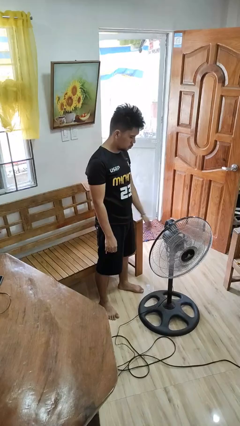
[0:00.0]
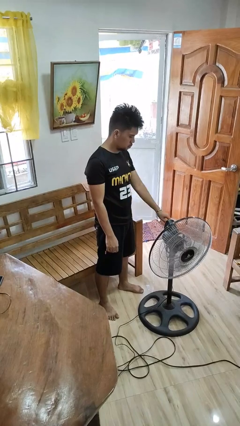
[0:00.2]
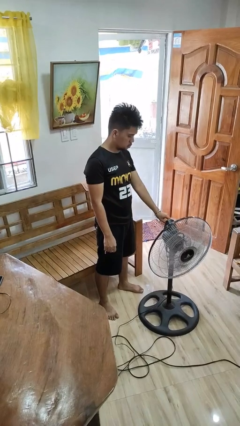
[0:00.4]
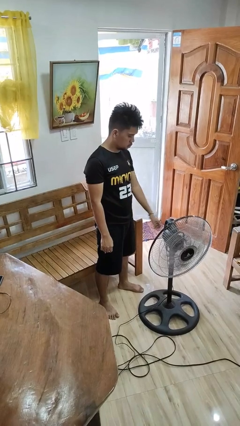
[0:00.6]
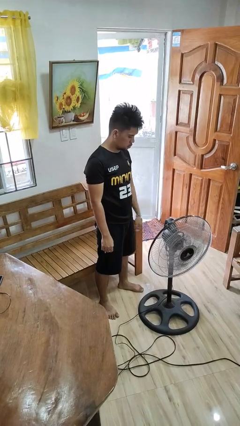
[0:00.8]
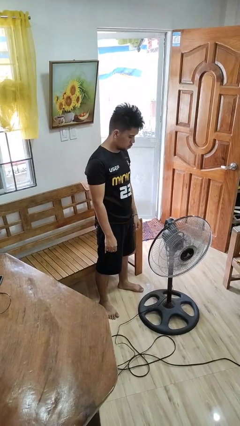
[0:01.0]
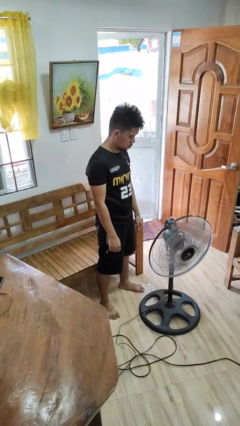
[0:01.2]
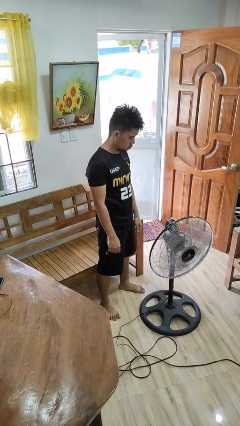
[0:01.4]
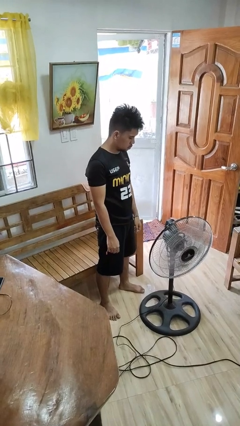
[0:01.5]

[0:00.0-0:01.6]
person turns off fan

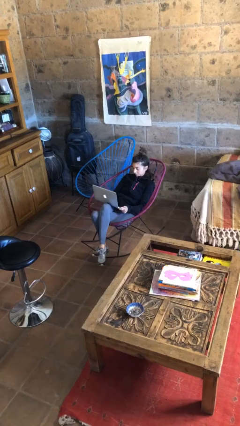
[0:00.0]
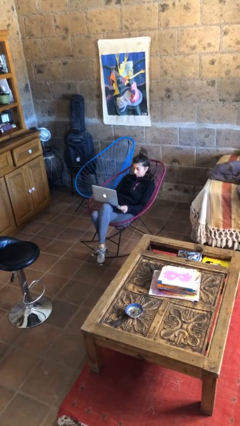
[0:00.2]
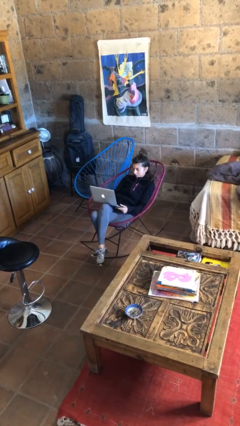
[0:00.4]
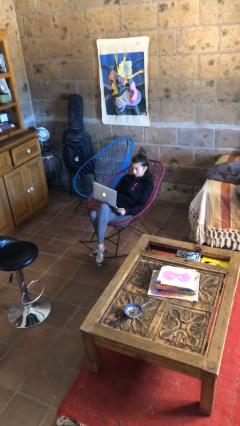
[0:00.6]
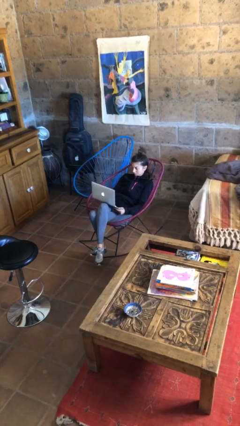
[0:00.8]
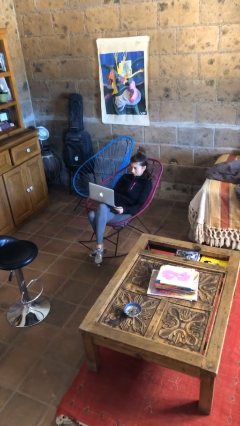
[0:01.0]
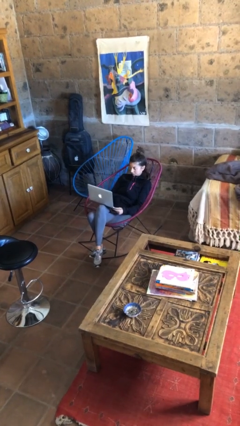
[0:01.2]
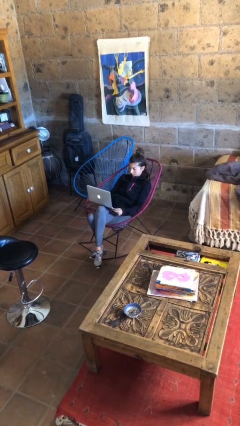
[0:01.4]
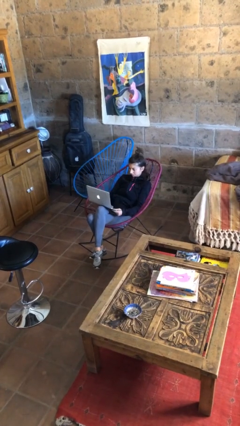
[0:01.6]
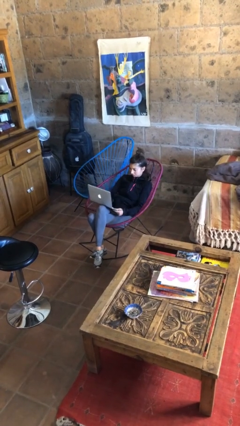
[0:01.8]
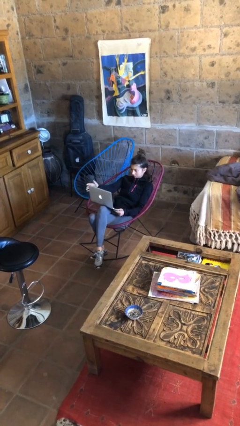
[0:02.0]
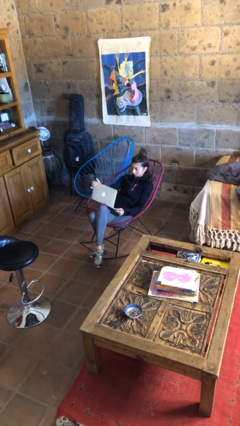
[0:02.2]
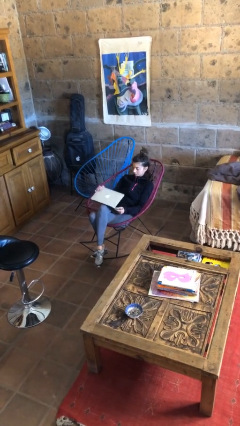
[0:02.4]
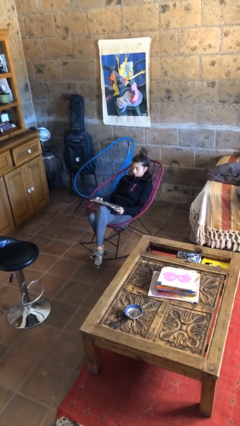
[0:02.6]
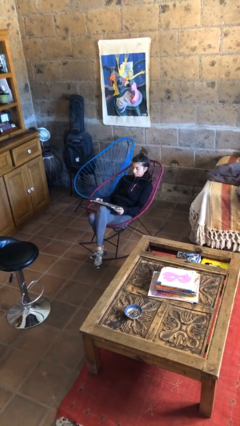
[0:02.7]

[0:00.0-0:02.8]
person interacts with laptop

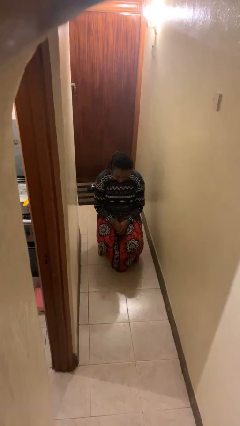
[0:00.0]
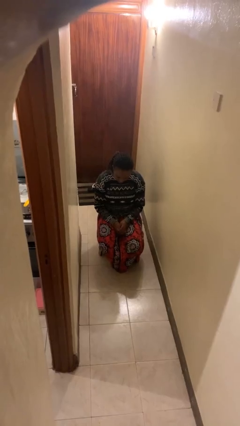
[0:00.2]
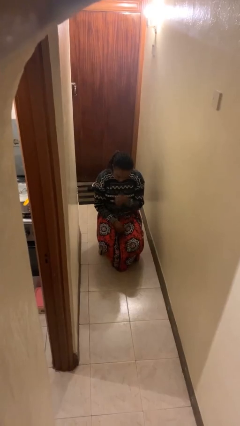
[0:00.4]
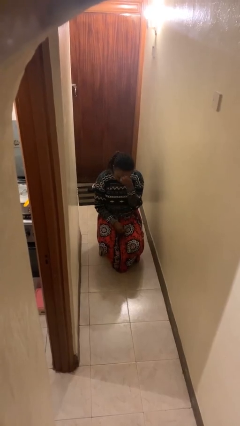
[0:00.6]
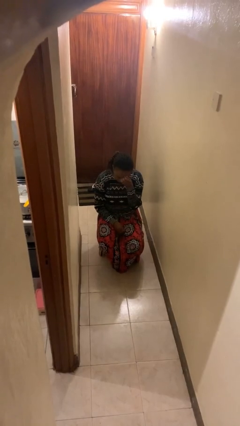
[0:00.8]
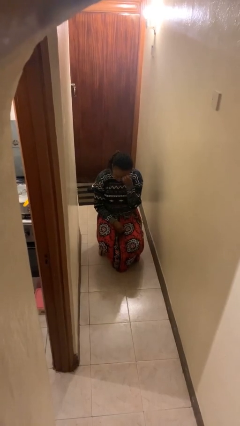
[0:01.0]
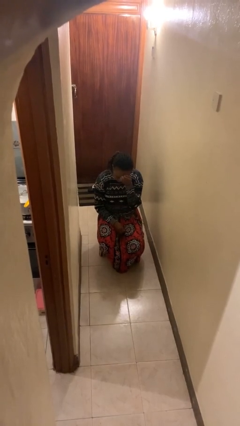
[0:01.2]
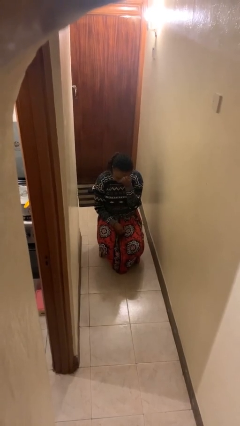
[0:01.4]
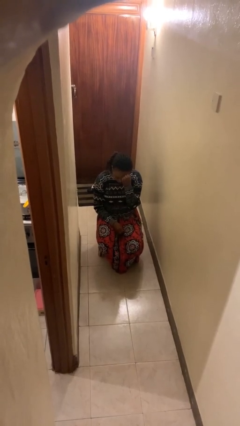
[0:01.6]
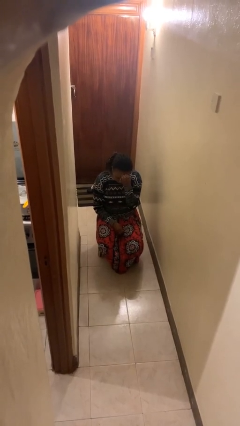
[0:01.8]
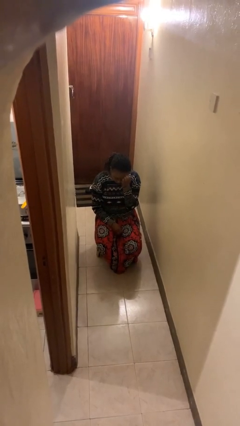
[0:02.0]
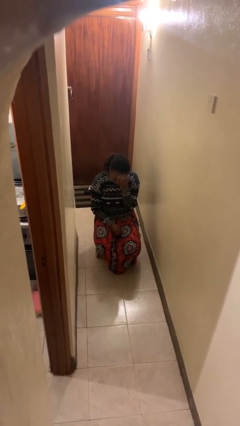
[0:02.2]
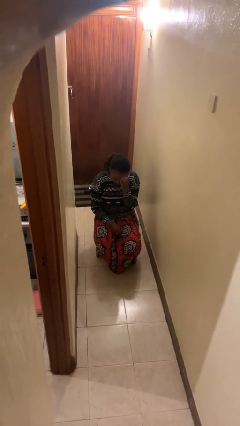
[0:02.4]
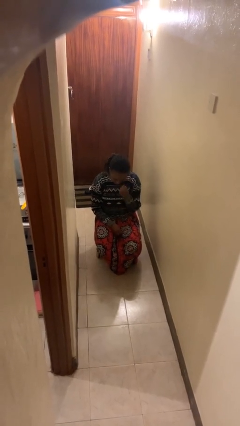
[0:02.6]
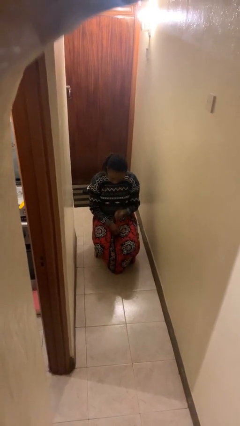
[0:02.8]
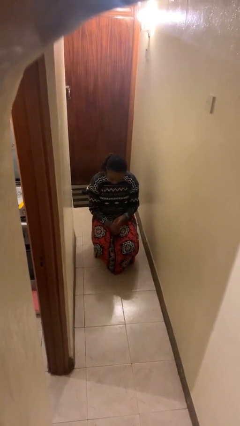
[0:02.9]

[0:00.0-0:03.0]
person scratches face

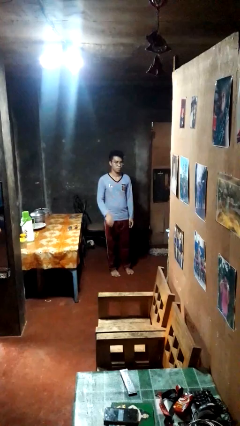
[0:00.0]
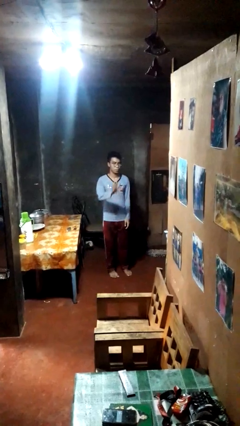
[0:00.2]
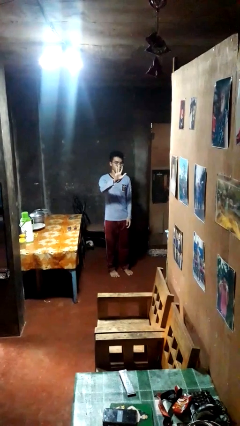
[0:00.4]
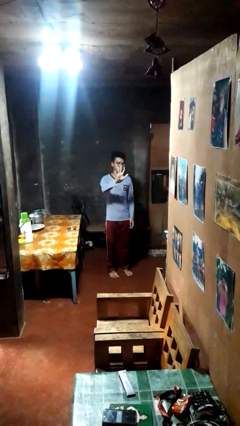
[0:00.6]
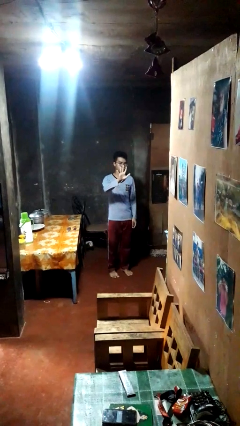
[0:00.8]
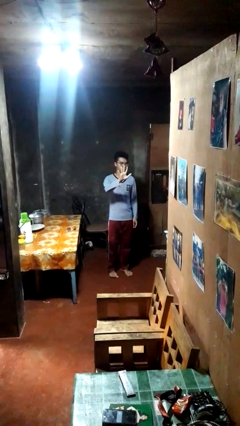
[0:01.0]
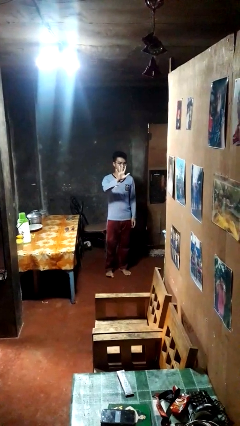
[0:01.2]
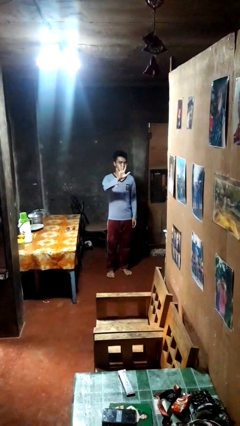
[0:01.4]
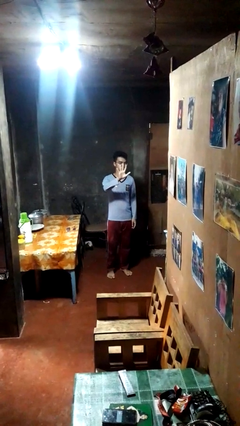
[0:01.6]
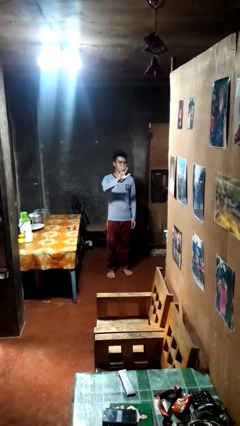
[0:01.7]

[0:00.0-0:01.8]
person gestures number five

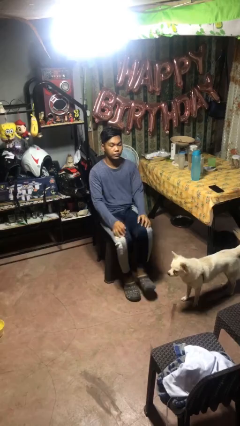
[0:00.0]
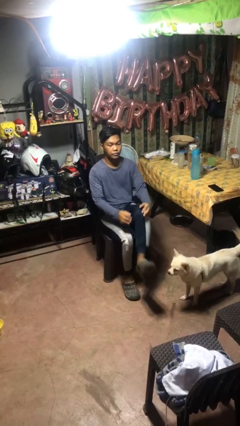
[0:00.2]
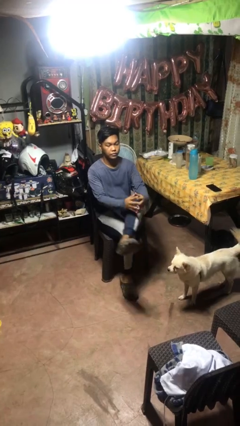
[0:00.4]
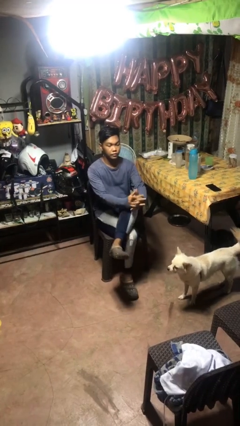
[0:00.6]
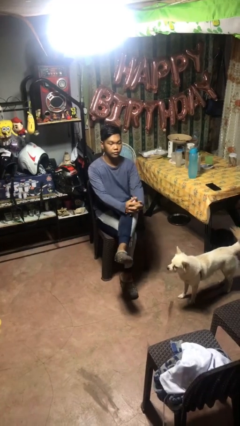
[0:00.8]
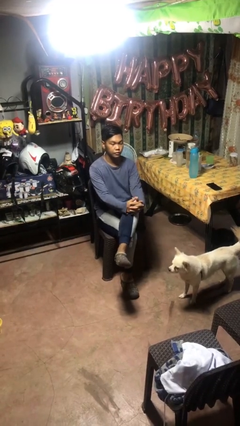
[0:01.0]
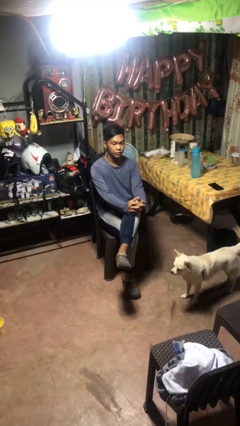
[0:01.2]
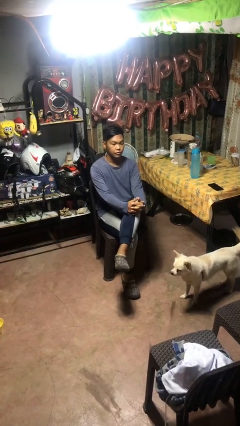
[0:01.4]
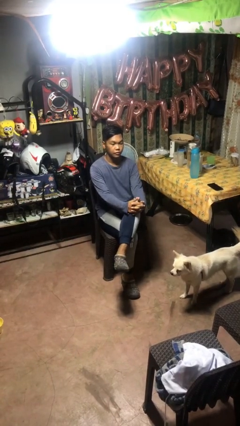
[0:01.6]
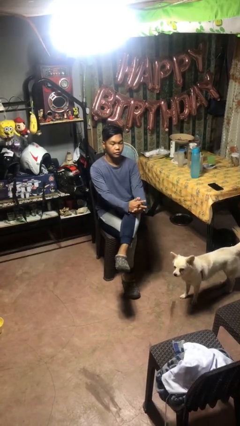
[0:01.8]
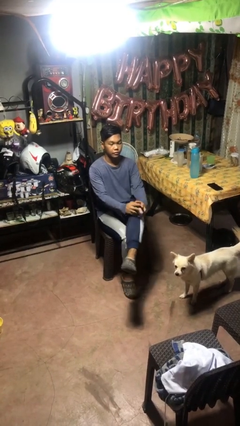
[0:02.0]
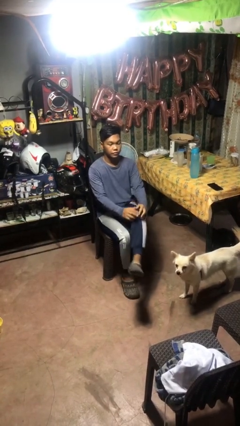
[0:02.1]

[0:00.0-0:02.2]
person crosses legs

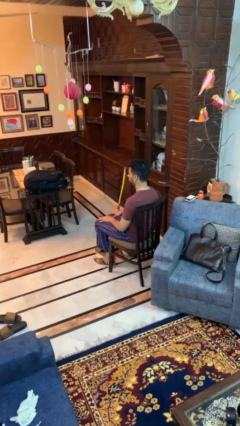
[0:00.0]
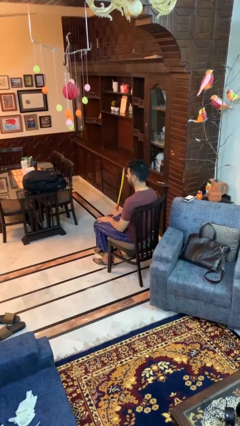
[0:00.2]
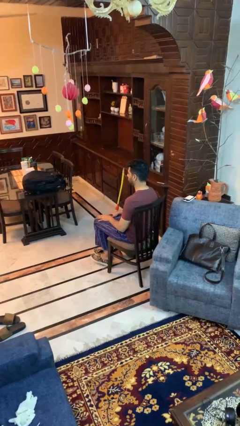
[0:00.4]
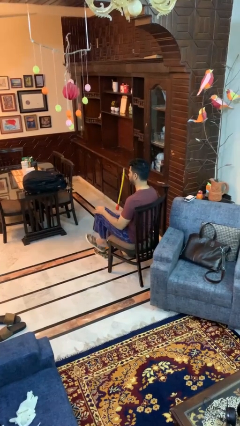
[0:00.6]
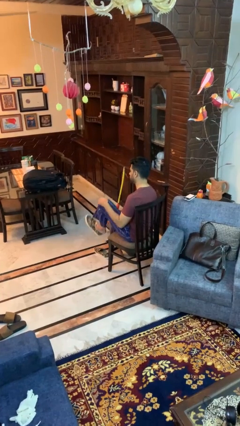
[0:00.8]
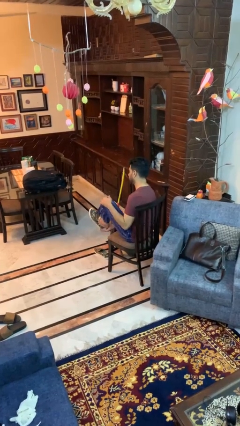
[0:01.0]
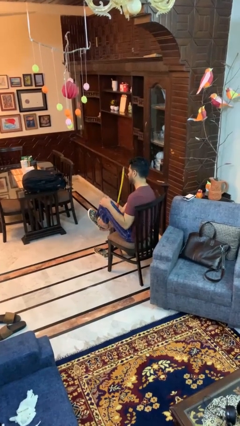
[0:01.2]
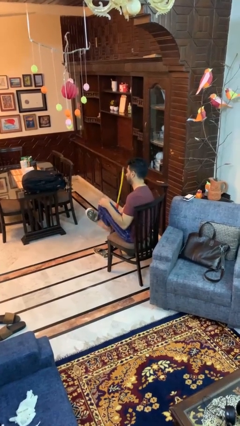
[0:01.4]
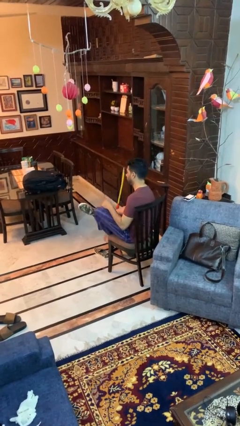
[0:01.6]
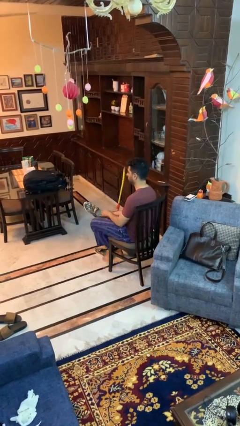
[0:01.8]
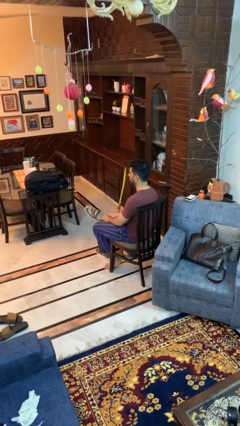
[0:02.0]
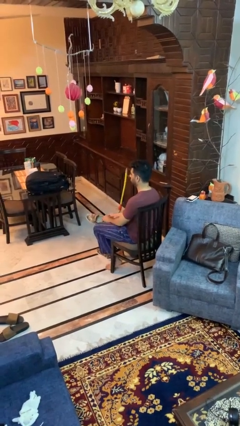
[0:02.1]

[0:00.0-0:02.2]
person takes off shoes

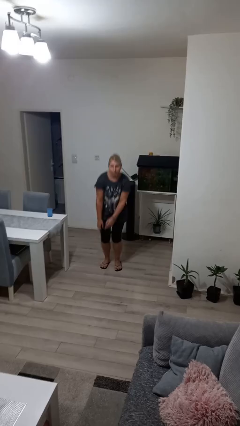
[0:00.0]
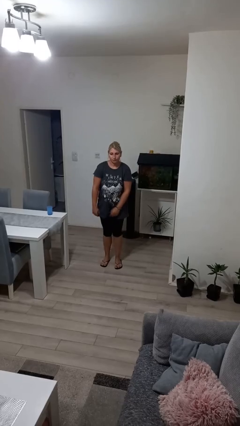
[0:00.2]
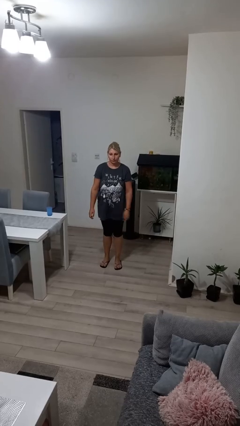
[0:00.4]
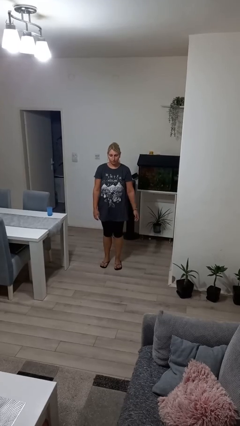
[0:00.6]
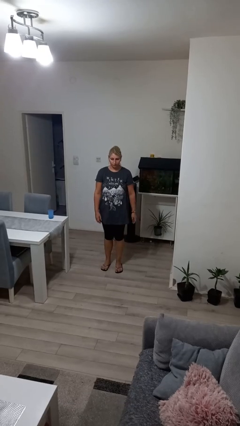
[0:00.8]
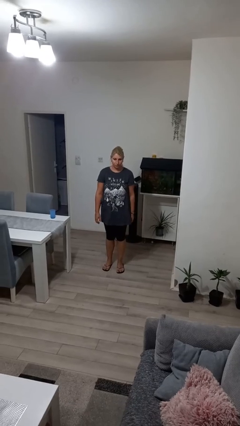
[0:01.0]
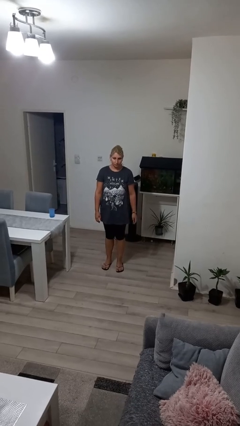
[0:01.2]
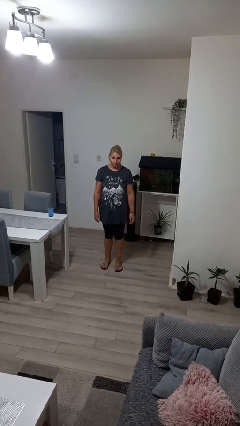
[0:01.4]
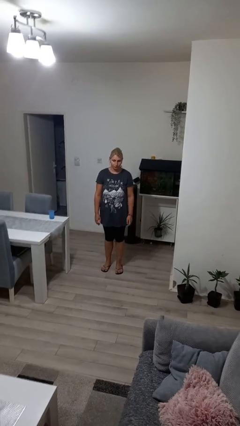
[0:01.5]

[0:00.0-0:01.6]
person stands up from floor

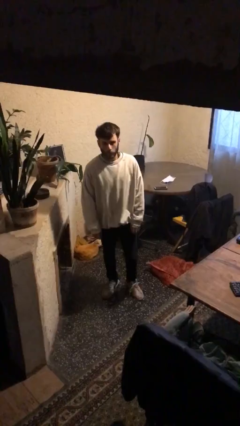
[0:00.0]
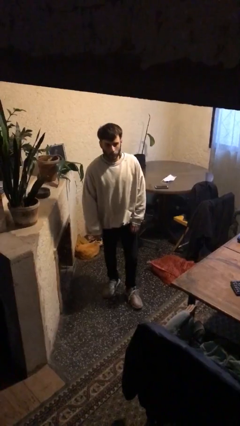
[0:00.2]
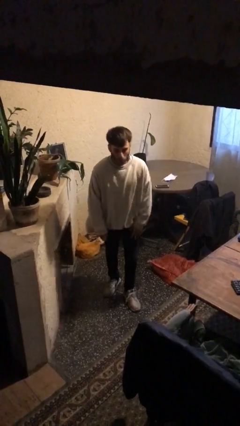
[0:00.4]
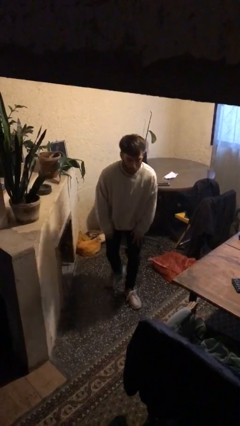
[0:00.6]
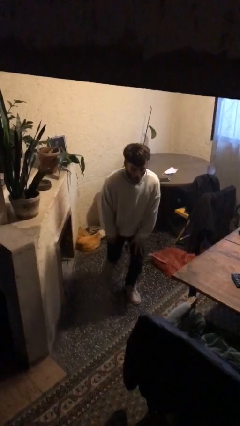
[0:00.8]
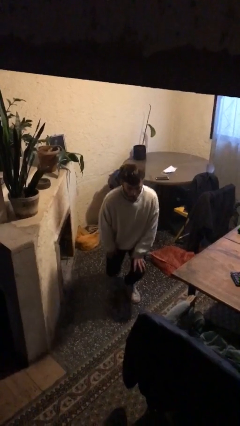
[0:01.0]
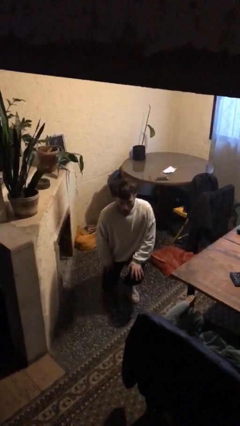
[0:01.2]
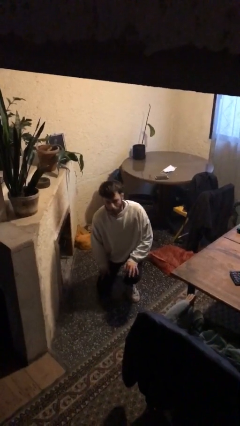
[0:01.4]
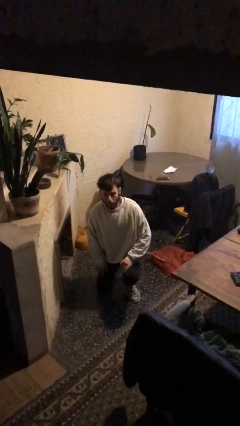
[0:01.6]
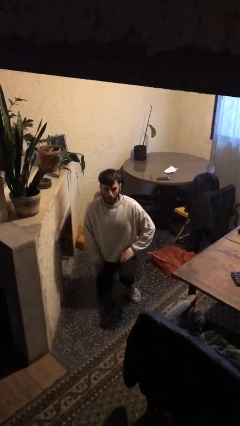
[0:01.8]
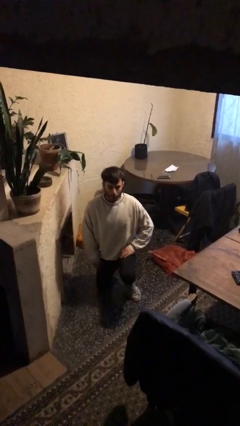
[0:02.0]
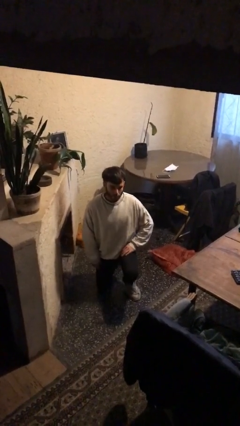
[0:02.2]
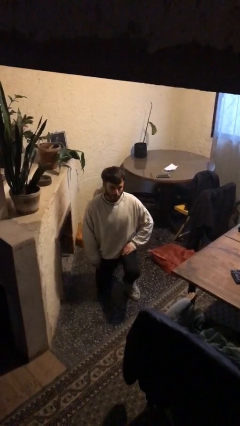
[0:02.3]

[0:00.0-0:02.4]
person kneels
